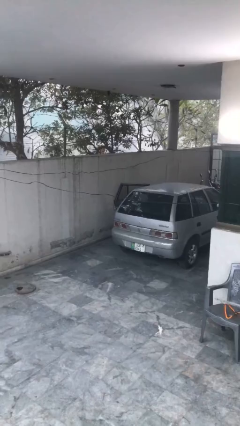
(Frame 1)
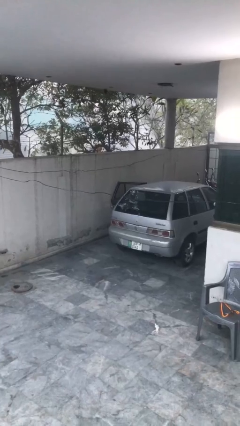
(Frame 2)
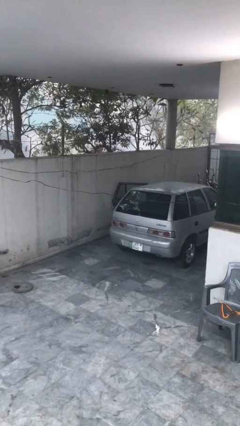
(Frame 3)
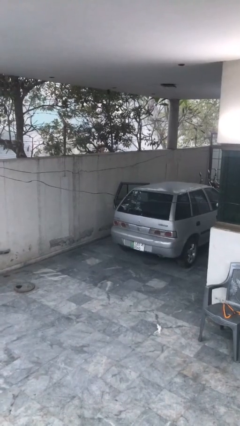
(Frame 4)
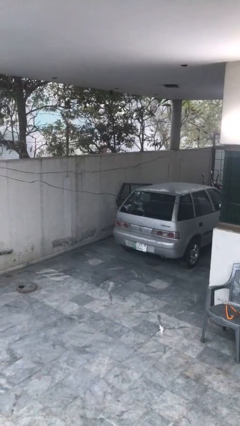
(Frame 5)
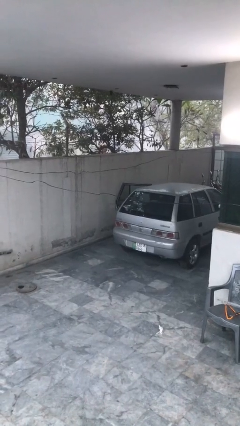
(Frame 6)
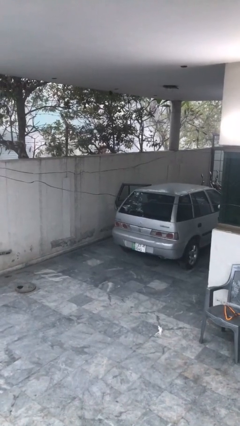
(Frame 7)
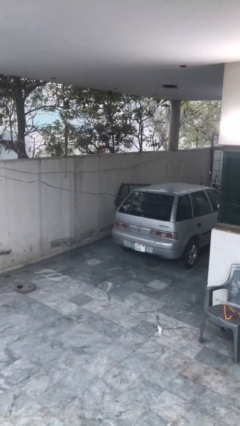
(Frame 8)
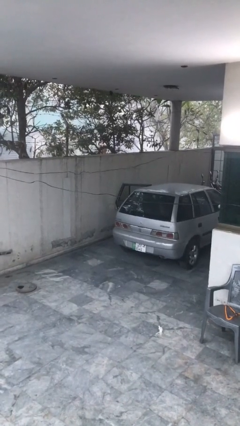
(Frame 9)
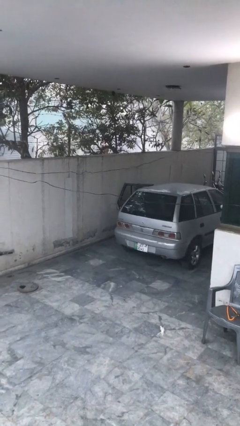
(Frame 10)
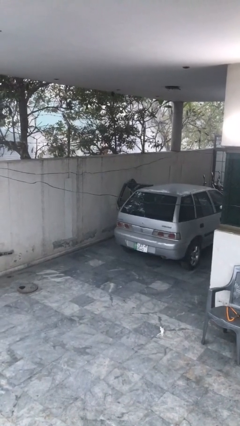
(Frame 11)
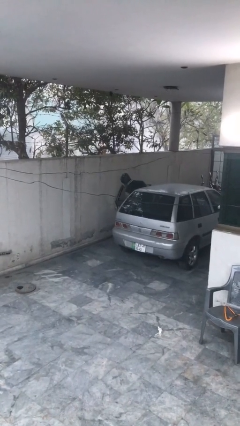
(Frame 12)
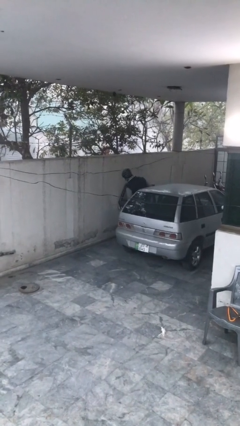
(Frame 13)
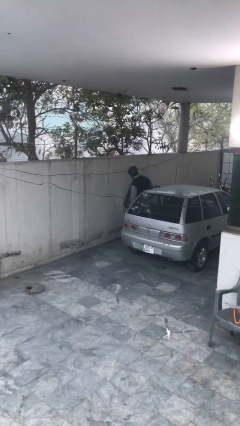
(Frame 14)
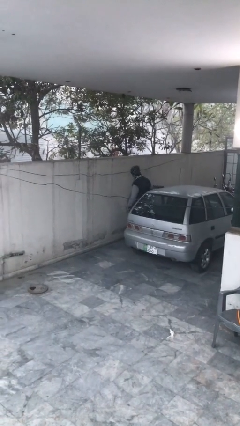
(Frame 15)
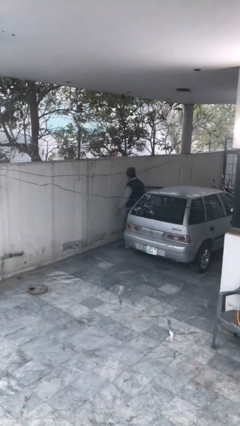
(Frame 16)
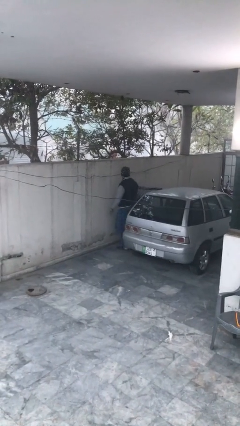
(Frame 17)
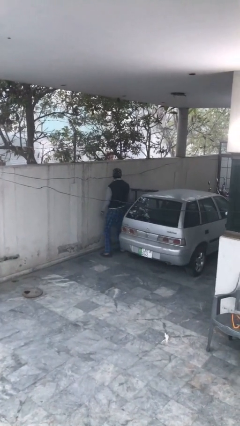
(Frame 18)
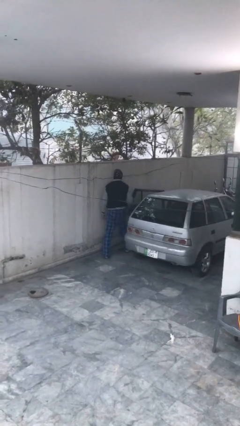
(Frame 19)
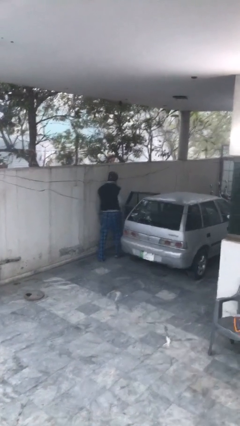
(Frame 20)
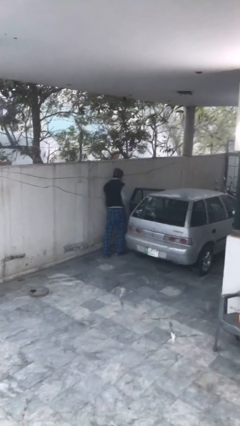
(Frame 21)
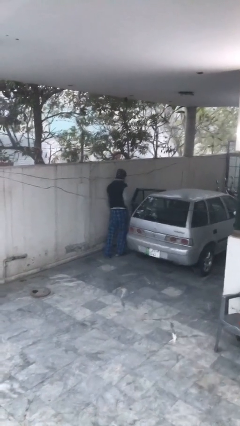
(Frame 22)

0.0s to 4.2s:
person exits car

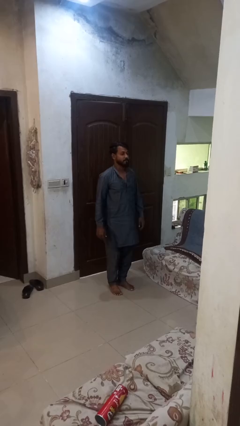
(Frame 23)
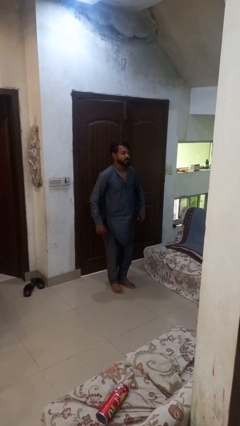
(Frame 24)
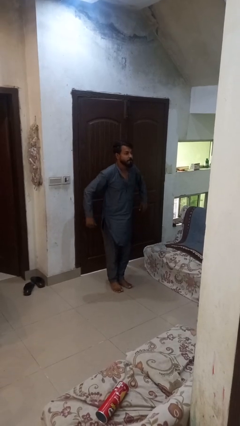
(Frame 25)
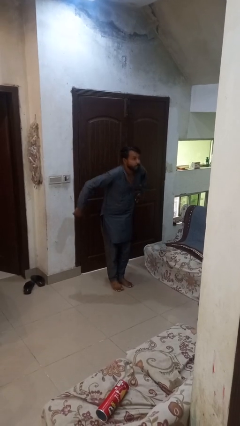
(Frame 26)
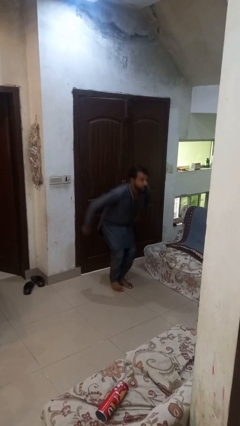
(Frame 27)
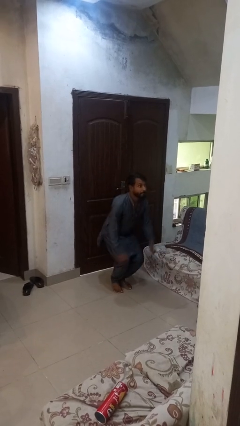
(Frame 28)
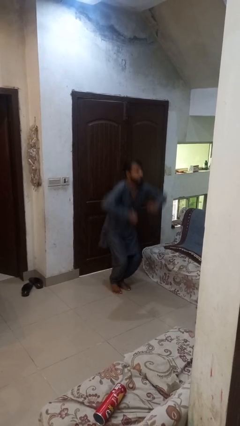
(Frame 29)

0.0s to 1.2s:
person jumps

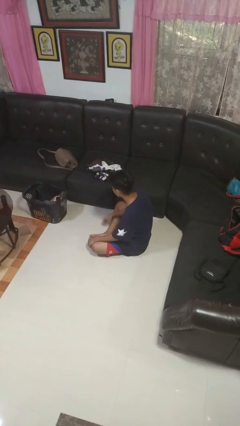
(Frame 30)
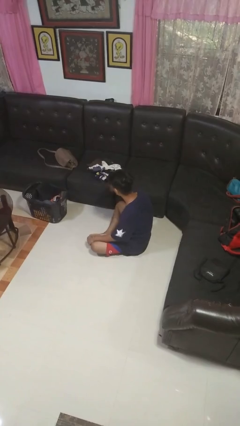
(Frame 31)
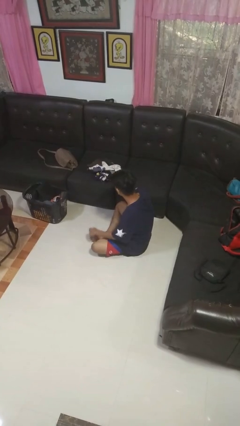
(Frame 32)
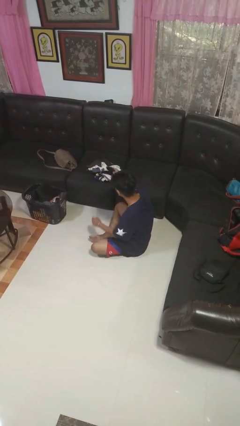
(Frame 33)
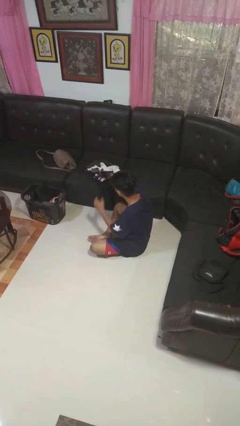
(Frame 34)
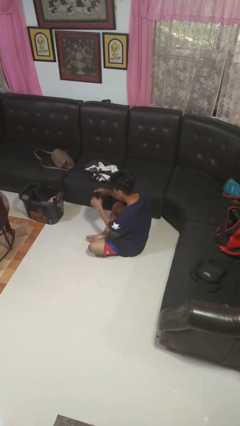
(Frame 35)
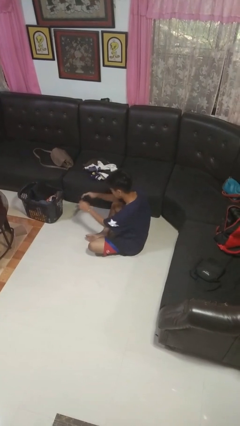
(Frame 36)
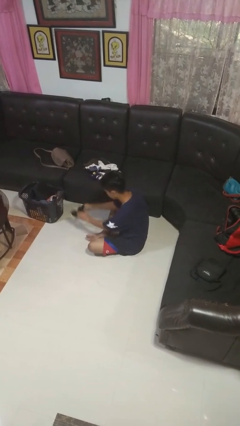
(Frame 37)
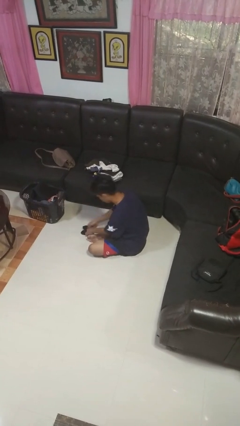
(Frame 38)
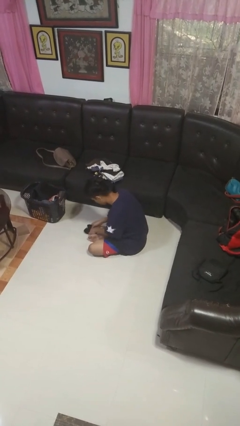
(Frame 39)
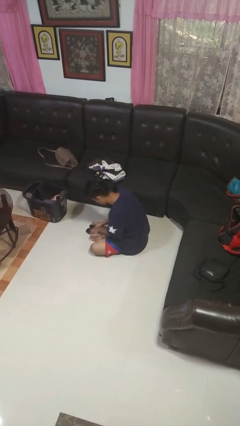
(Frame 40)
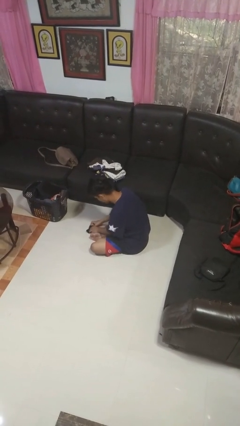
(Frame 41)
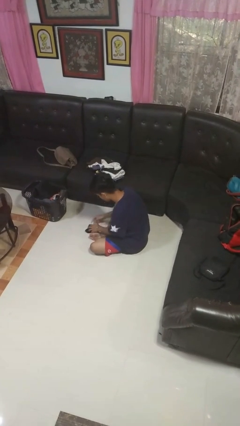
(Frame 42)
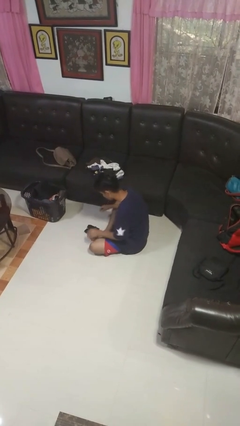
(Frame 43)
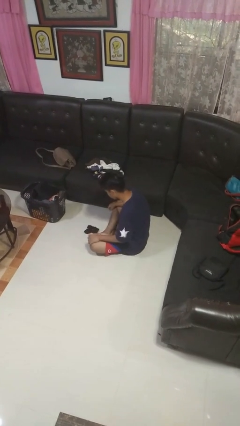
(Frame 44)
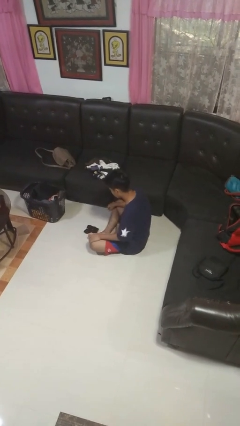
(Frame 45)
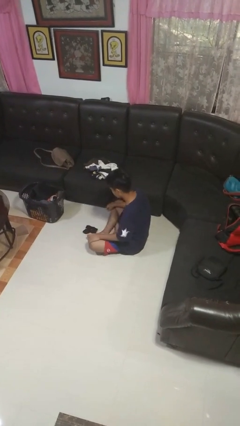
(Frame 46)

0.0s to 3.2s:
person folds socks

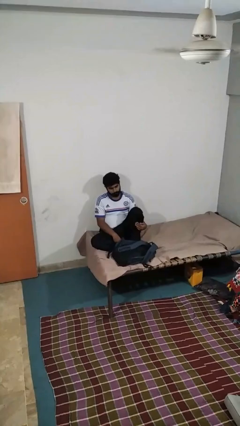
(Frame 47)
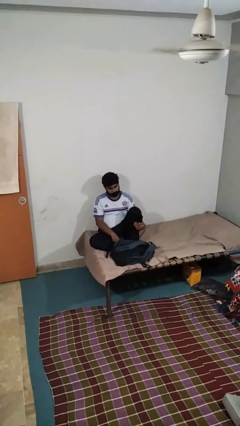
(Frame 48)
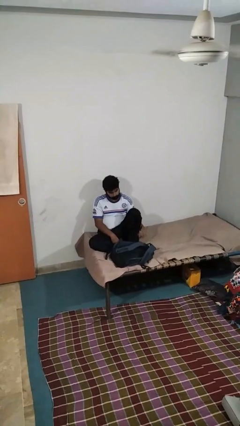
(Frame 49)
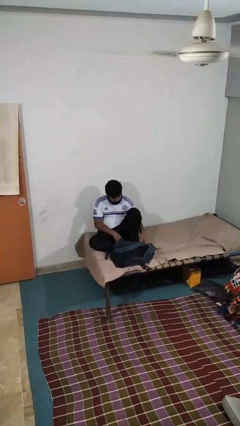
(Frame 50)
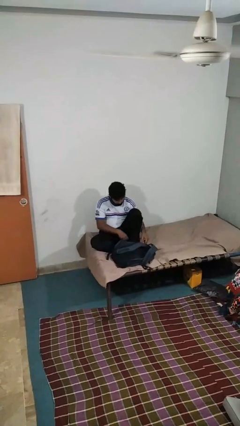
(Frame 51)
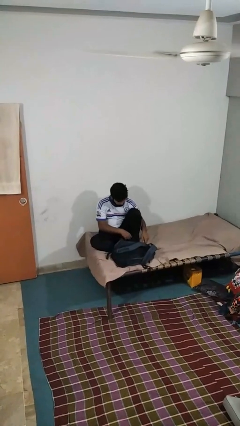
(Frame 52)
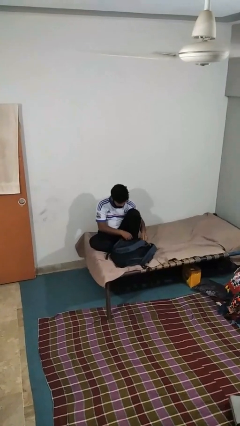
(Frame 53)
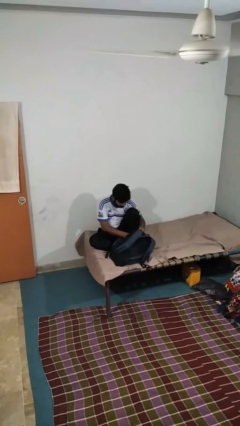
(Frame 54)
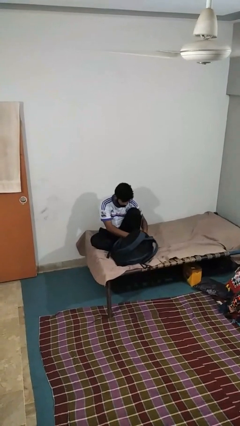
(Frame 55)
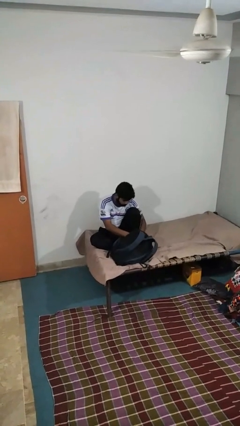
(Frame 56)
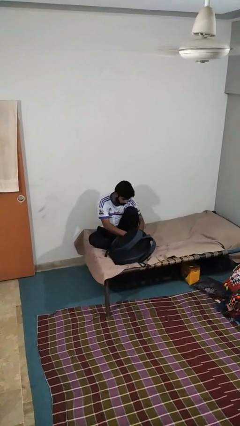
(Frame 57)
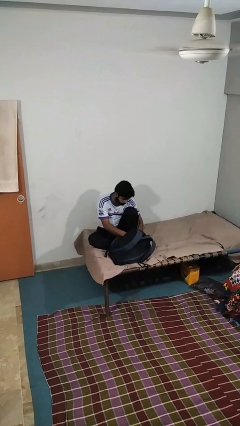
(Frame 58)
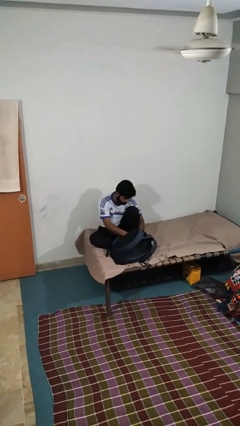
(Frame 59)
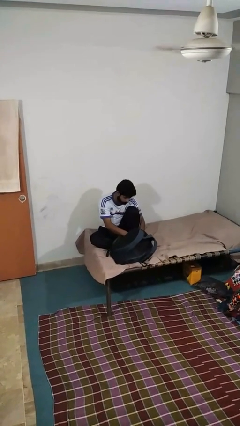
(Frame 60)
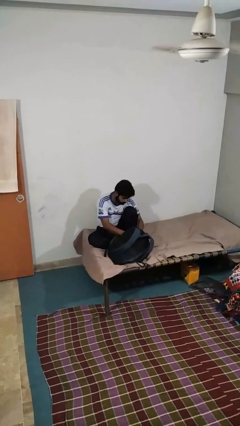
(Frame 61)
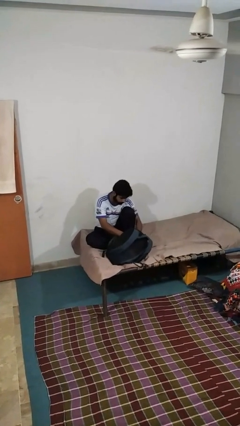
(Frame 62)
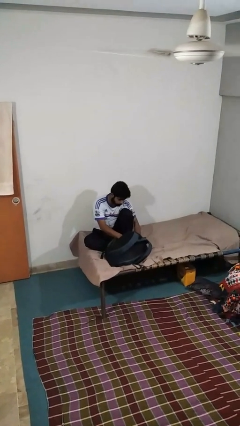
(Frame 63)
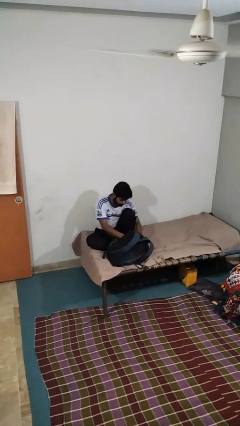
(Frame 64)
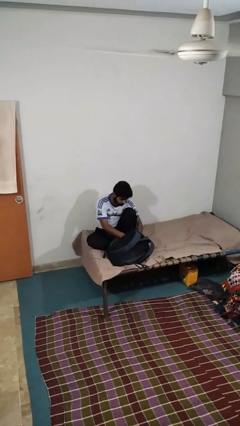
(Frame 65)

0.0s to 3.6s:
person searches in backpack

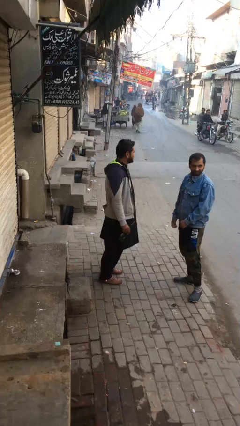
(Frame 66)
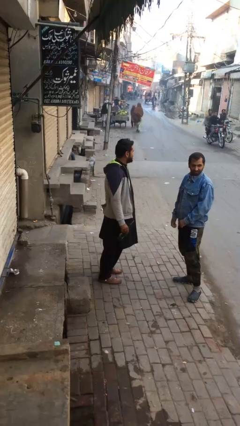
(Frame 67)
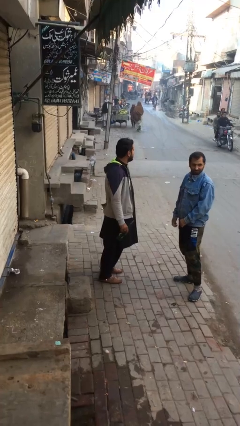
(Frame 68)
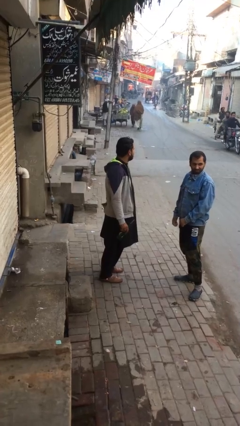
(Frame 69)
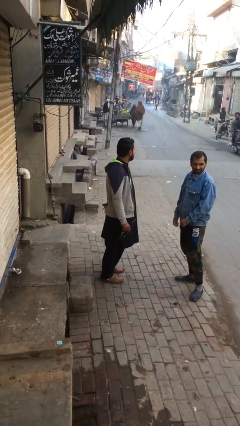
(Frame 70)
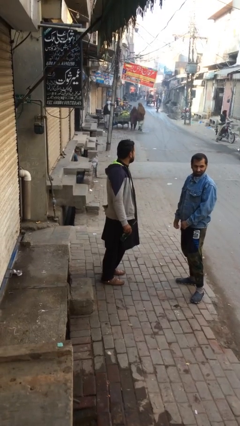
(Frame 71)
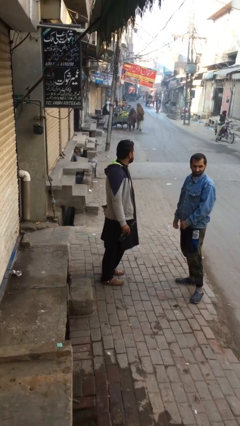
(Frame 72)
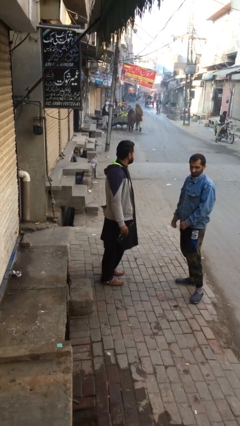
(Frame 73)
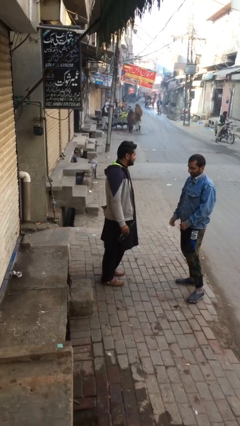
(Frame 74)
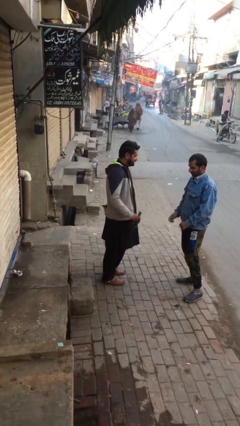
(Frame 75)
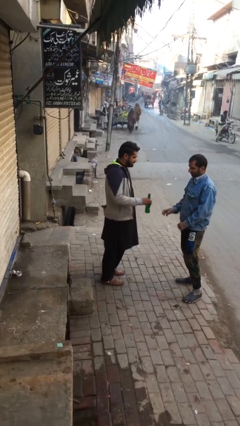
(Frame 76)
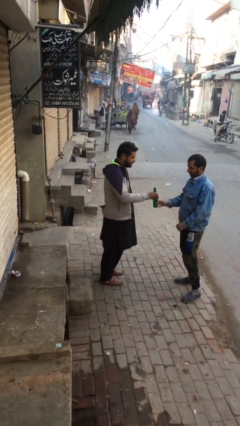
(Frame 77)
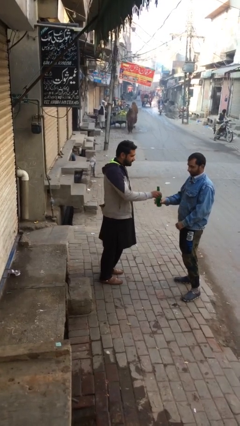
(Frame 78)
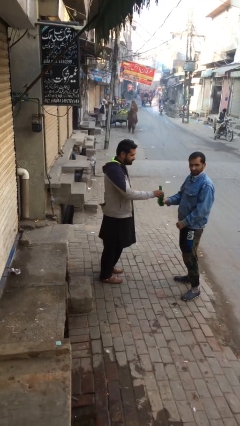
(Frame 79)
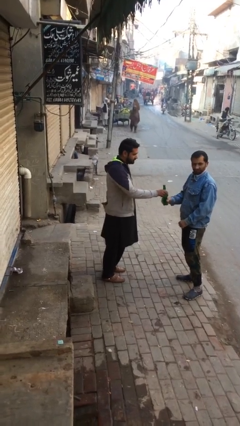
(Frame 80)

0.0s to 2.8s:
person transfers object to person

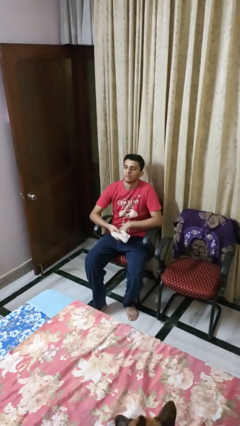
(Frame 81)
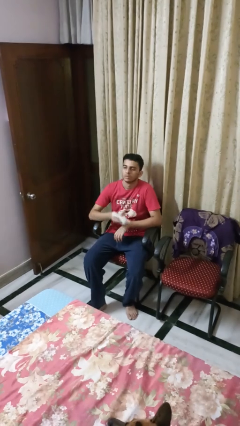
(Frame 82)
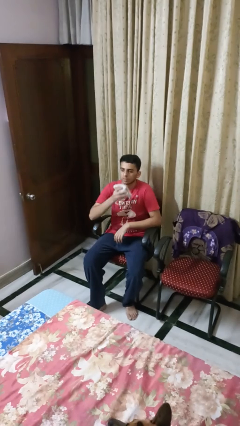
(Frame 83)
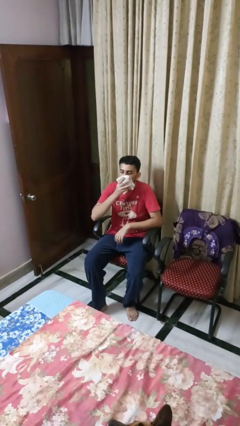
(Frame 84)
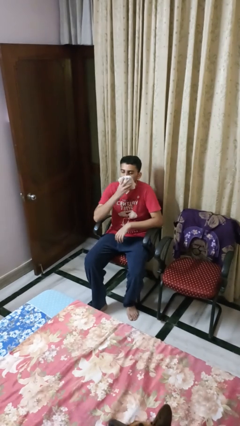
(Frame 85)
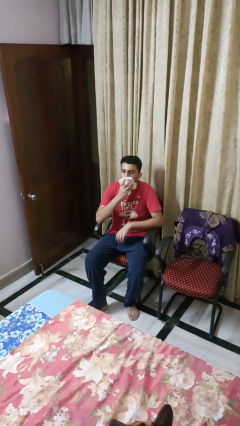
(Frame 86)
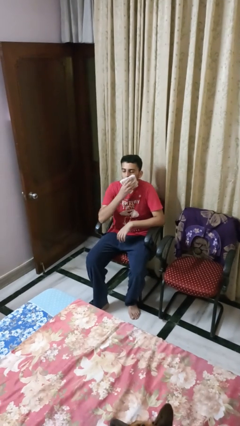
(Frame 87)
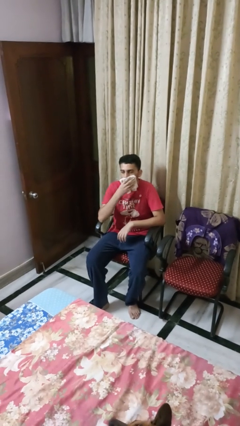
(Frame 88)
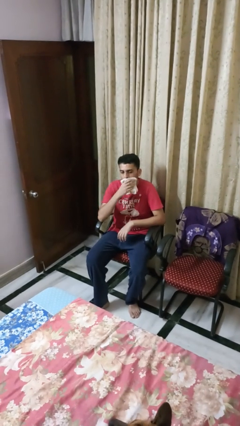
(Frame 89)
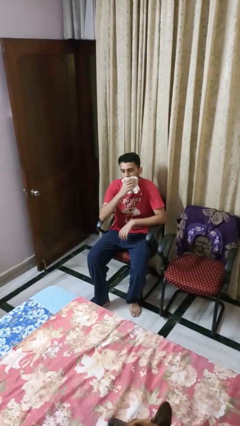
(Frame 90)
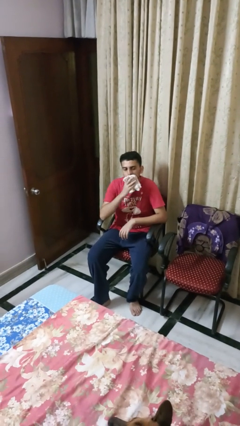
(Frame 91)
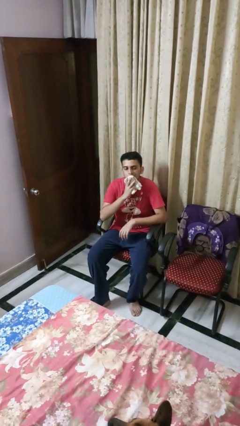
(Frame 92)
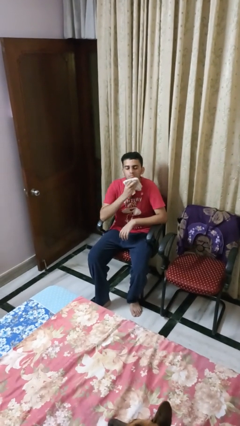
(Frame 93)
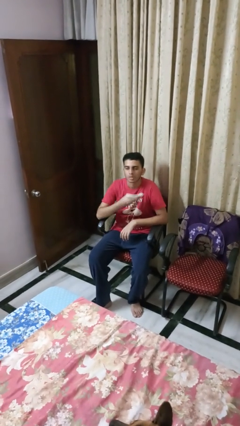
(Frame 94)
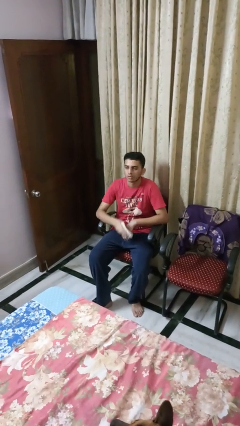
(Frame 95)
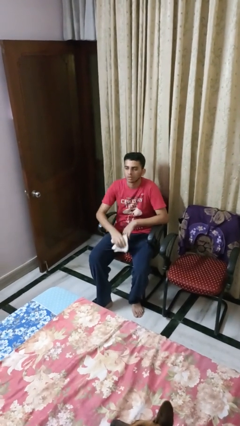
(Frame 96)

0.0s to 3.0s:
person wipes mouth with napkin
